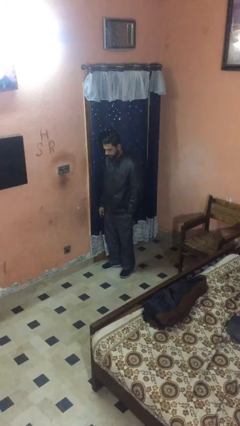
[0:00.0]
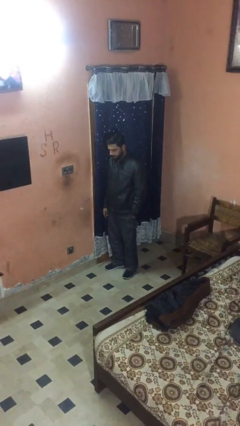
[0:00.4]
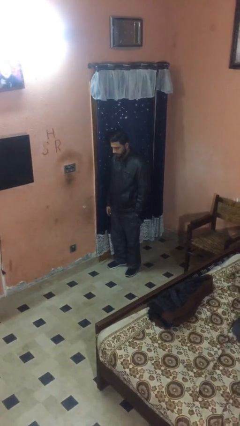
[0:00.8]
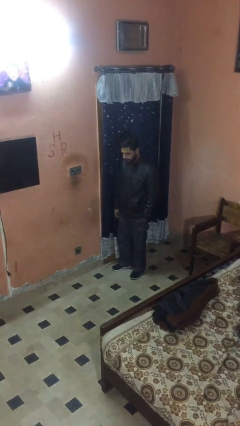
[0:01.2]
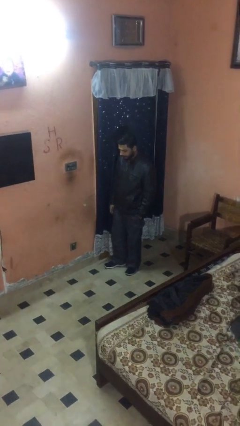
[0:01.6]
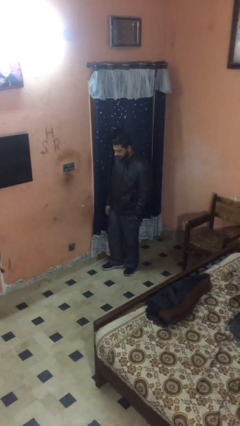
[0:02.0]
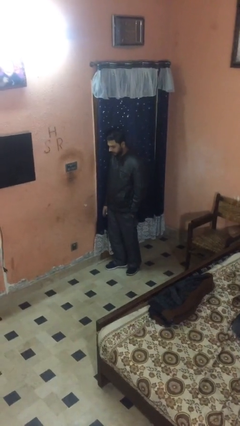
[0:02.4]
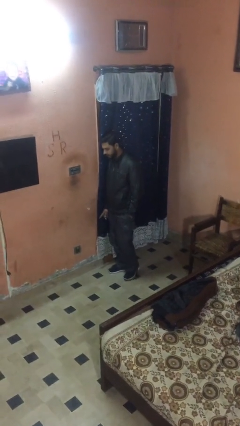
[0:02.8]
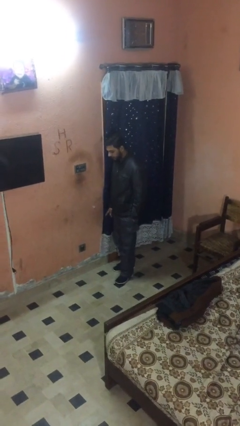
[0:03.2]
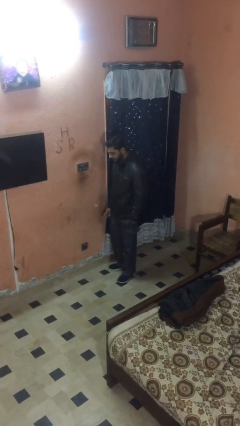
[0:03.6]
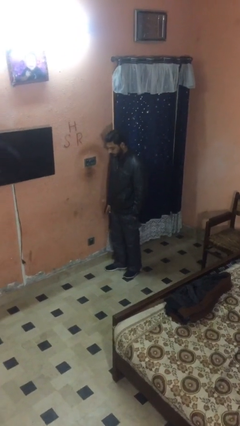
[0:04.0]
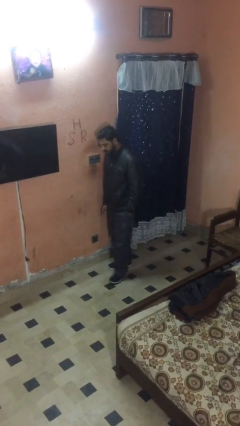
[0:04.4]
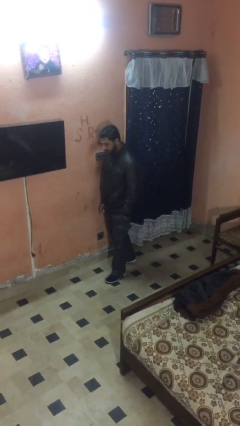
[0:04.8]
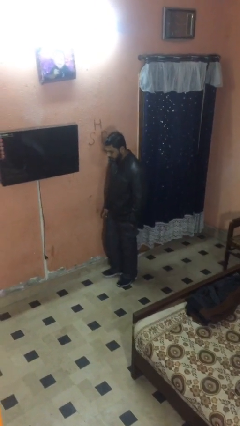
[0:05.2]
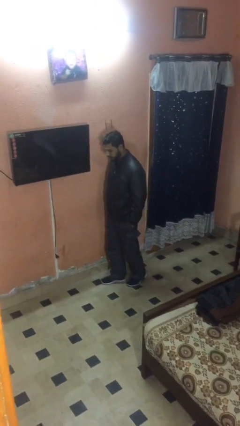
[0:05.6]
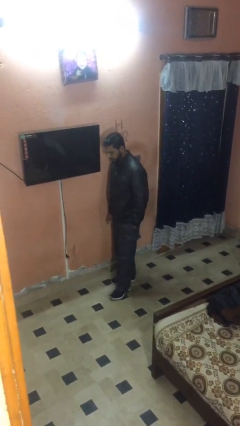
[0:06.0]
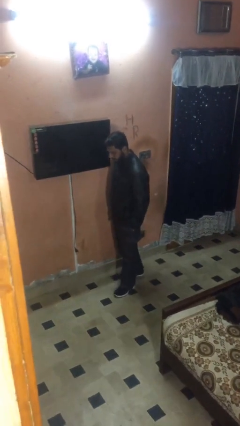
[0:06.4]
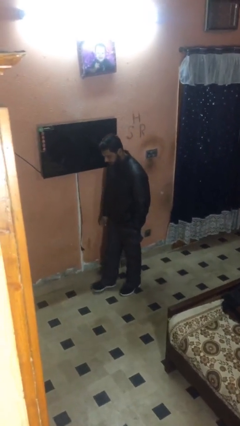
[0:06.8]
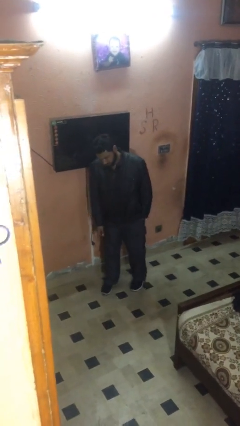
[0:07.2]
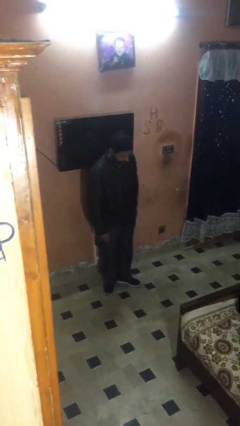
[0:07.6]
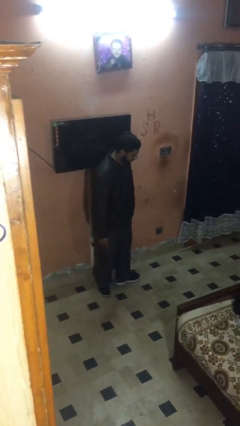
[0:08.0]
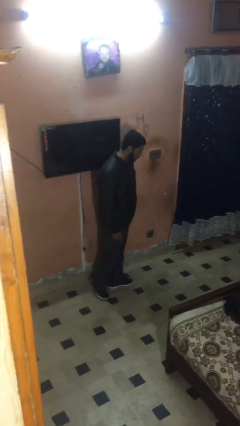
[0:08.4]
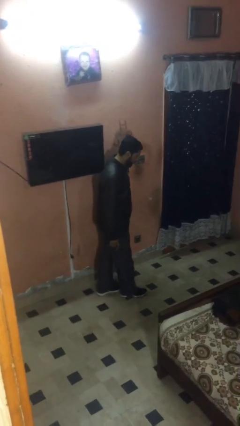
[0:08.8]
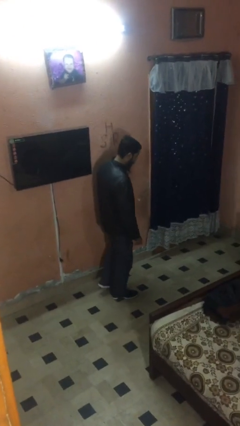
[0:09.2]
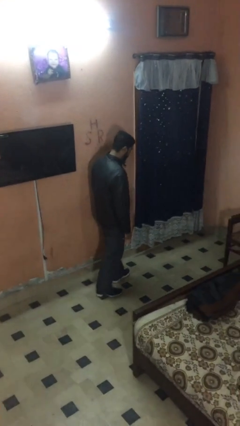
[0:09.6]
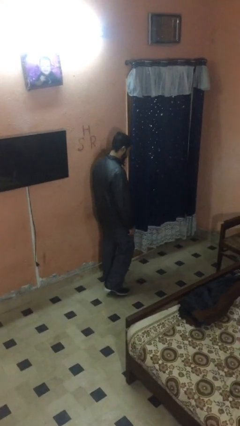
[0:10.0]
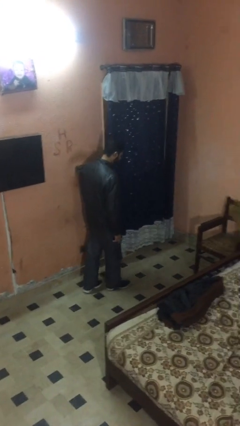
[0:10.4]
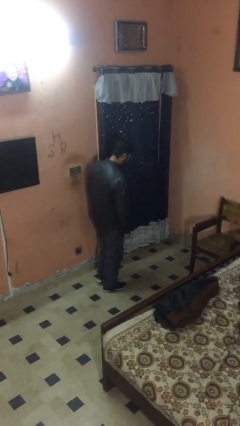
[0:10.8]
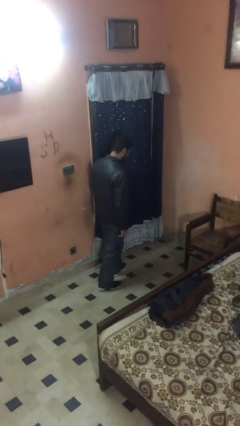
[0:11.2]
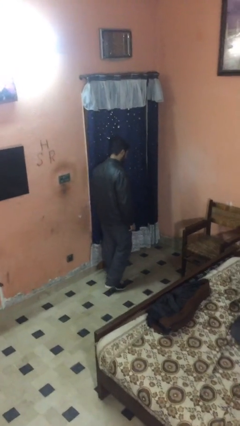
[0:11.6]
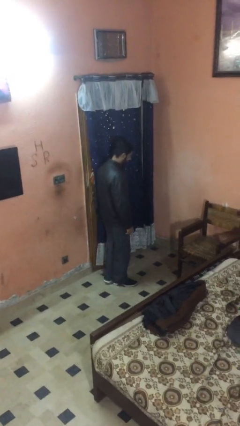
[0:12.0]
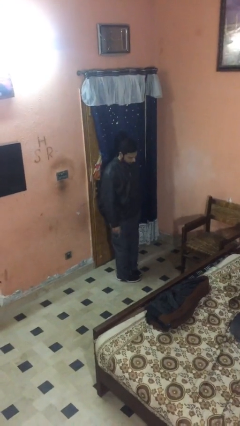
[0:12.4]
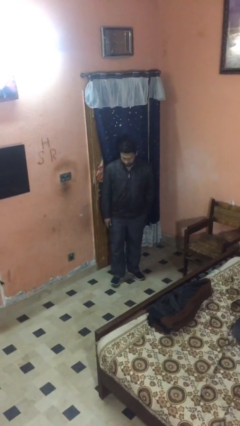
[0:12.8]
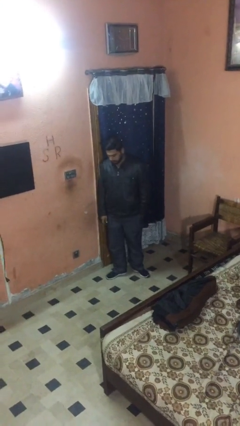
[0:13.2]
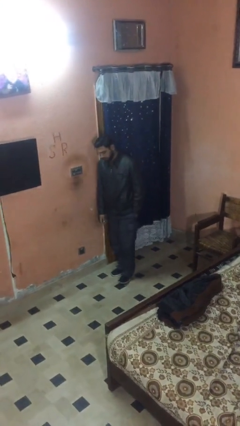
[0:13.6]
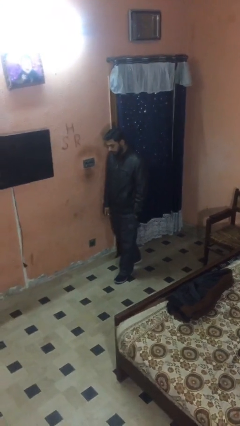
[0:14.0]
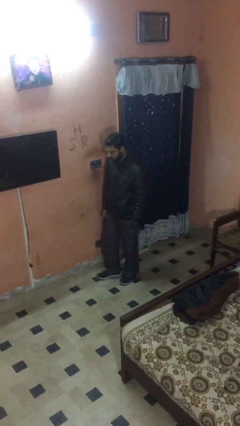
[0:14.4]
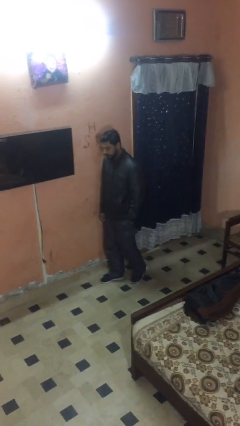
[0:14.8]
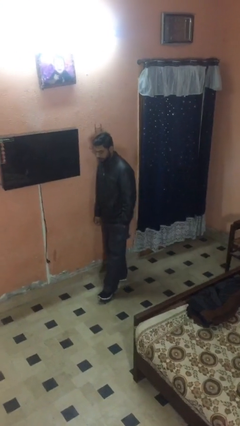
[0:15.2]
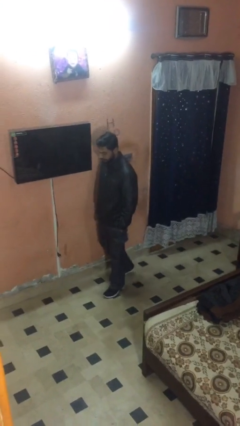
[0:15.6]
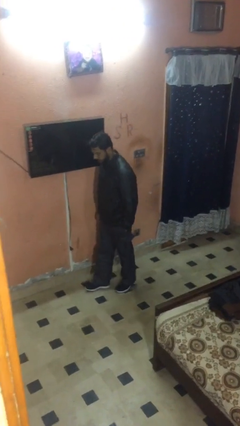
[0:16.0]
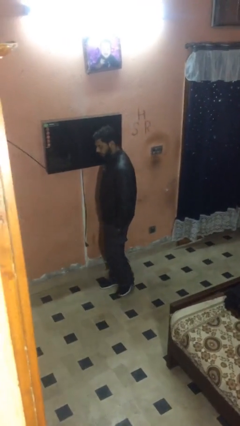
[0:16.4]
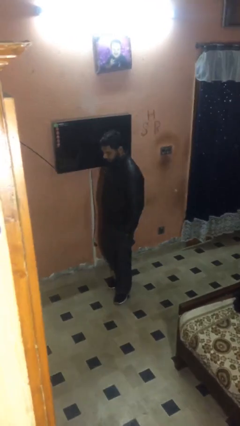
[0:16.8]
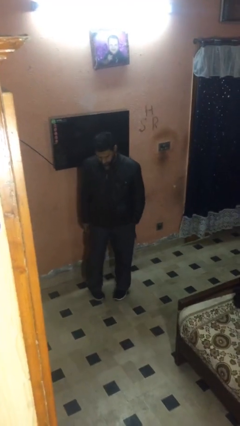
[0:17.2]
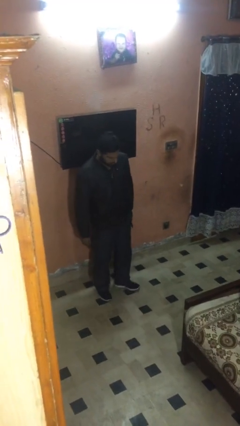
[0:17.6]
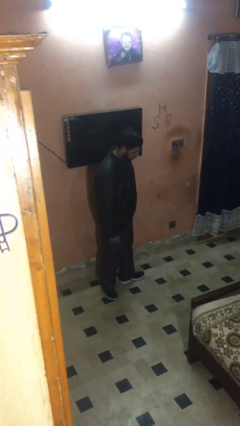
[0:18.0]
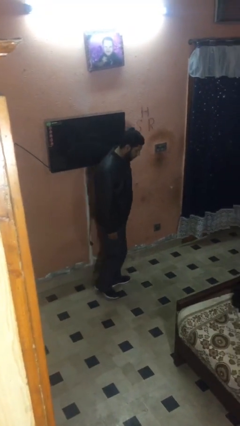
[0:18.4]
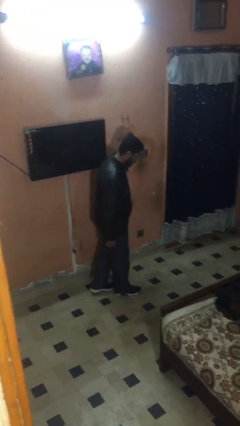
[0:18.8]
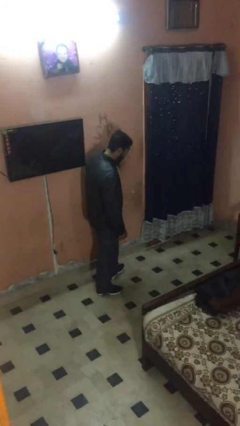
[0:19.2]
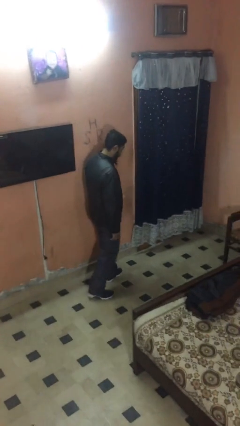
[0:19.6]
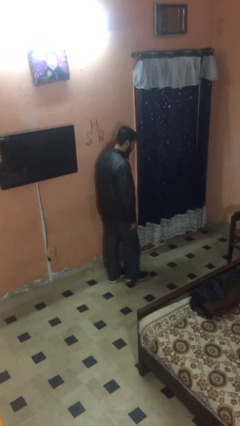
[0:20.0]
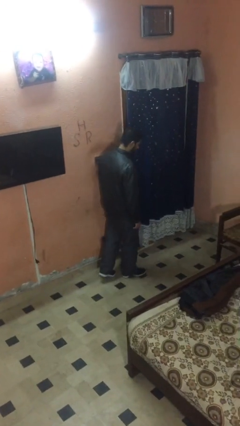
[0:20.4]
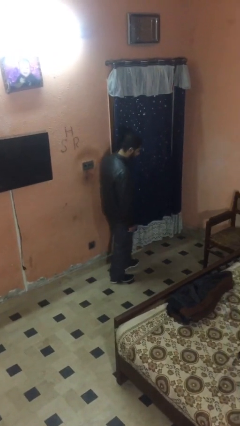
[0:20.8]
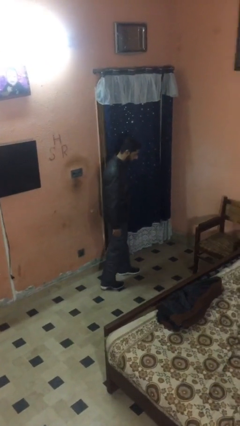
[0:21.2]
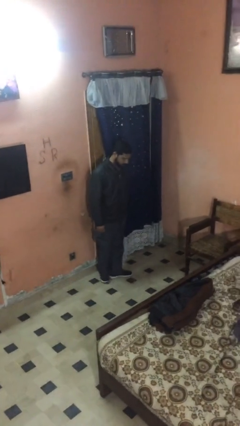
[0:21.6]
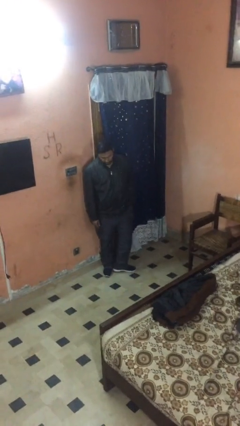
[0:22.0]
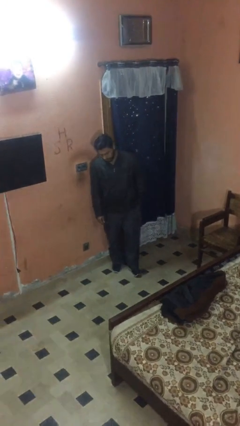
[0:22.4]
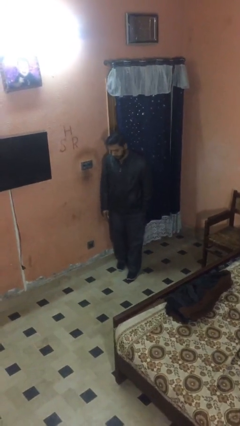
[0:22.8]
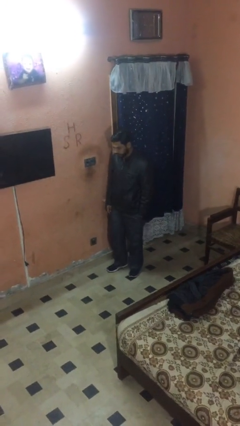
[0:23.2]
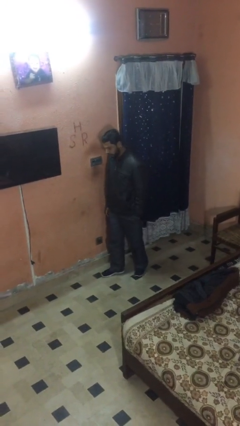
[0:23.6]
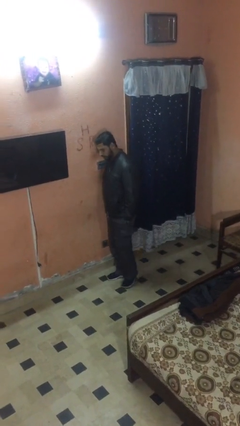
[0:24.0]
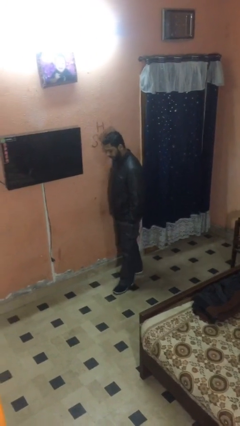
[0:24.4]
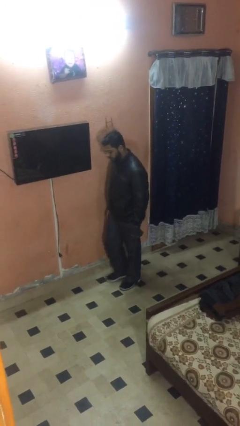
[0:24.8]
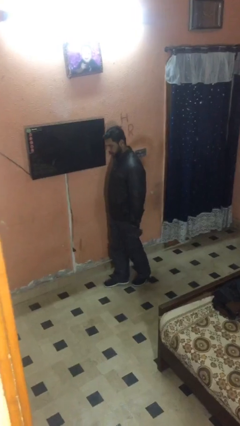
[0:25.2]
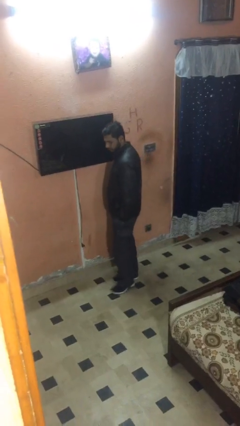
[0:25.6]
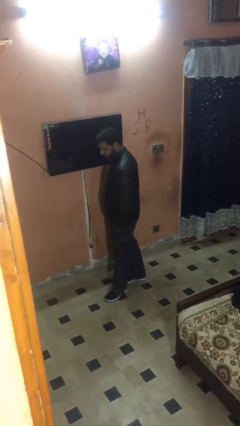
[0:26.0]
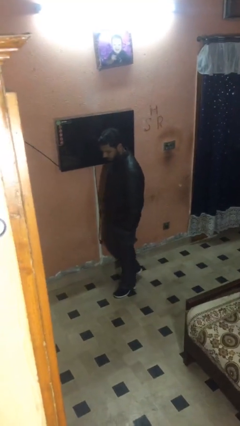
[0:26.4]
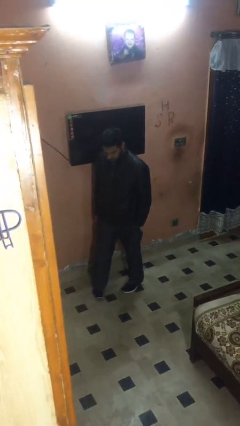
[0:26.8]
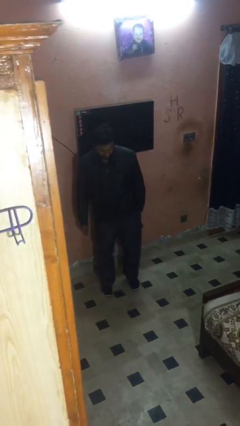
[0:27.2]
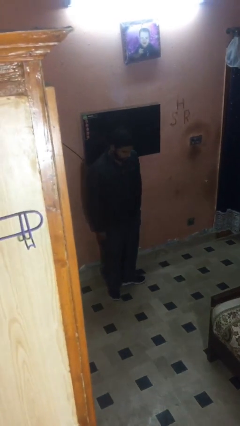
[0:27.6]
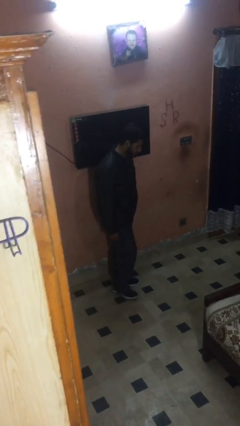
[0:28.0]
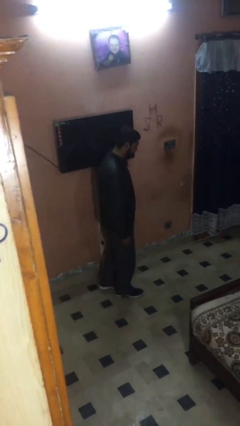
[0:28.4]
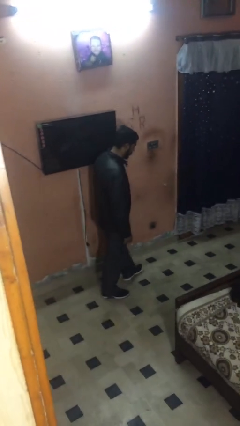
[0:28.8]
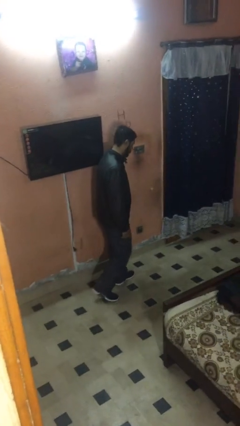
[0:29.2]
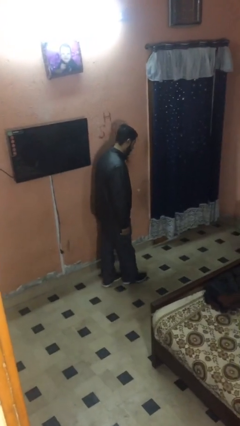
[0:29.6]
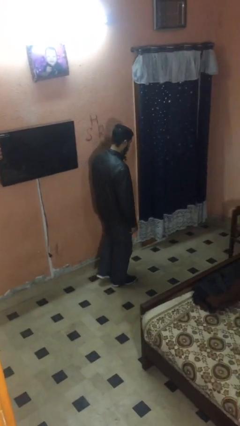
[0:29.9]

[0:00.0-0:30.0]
person walks

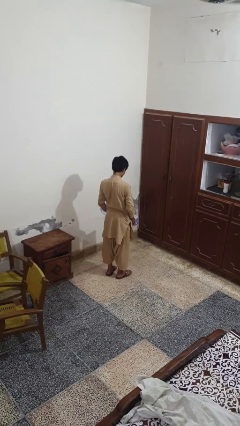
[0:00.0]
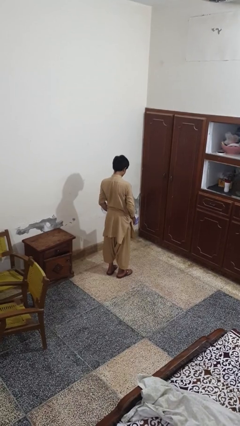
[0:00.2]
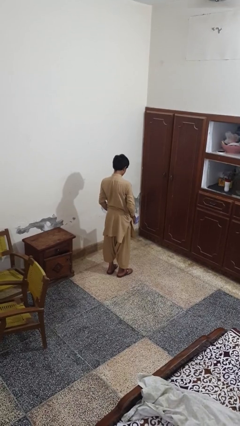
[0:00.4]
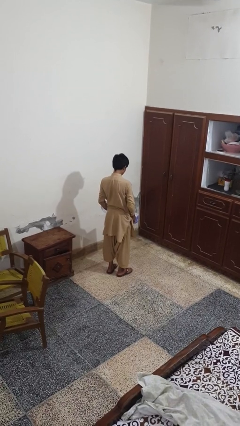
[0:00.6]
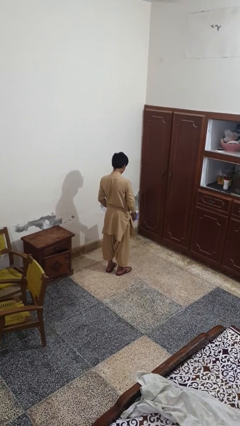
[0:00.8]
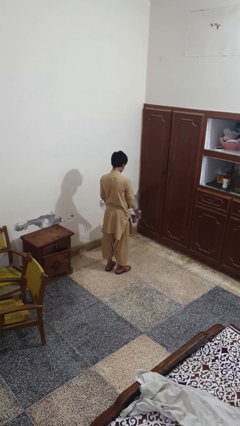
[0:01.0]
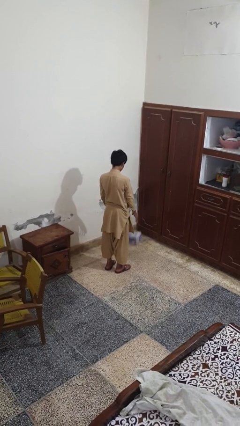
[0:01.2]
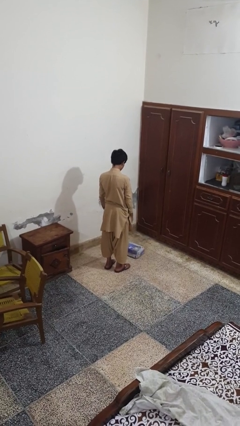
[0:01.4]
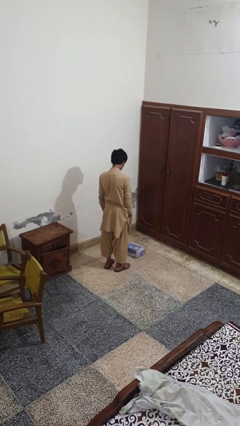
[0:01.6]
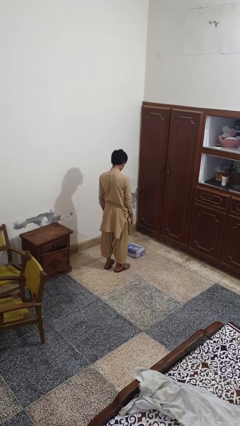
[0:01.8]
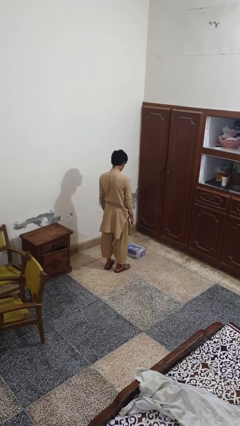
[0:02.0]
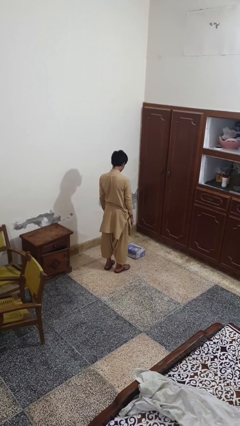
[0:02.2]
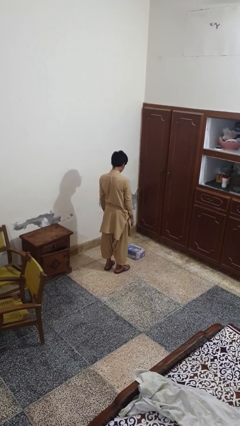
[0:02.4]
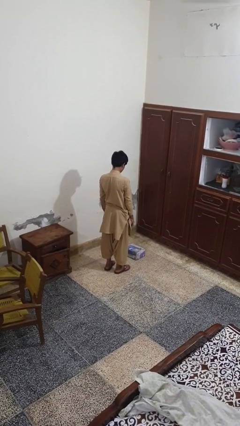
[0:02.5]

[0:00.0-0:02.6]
person throws object to ground

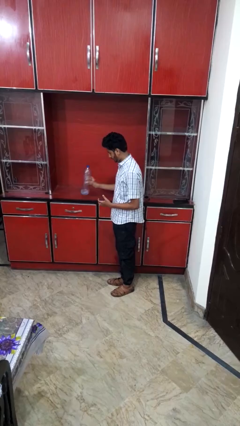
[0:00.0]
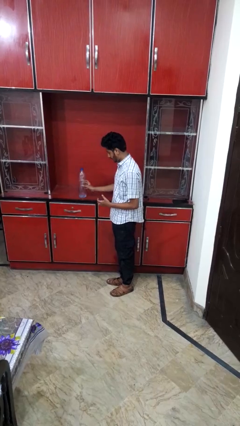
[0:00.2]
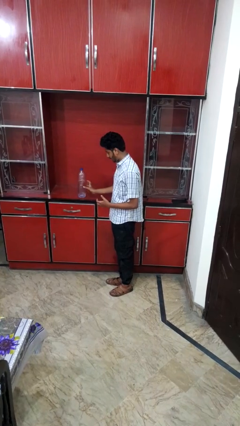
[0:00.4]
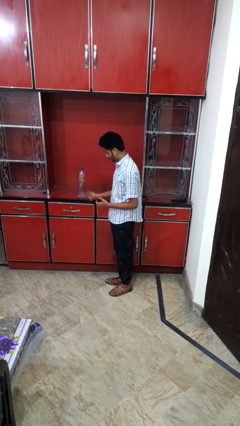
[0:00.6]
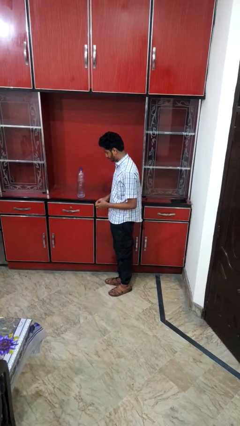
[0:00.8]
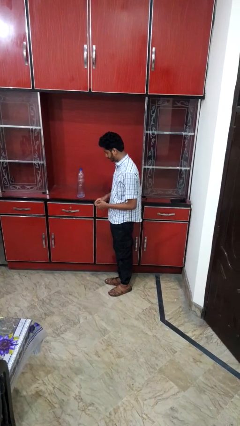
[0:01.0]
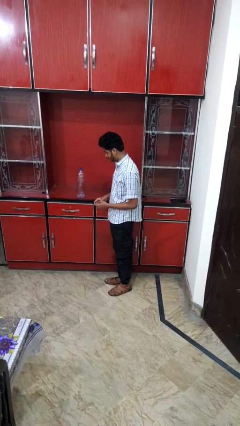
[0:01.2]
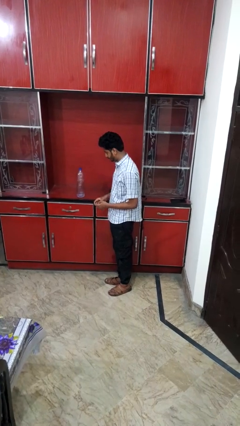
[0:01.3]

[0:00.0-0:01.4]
person puts down object on countertop
